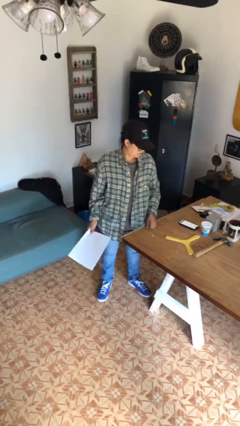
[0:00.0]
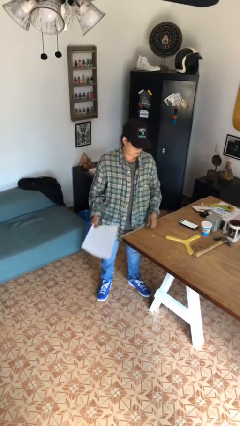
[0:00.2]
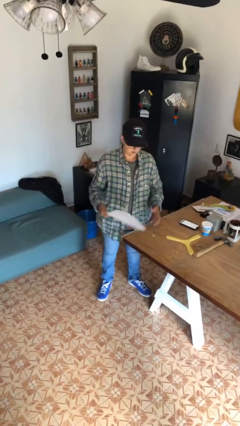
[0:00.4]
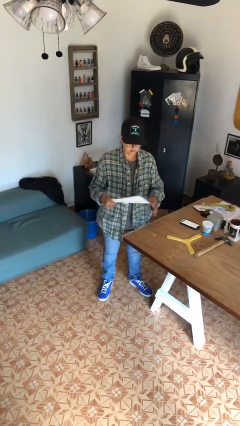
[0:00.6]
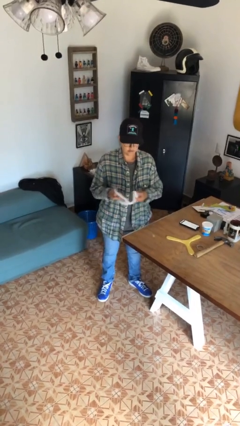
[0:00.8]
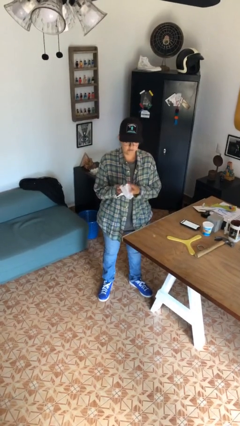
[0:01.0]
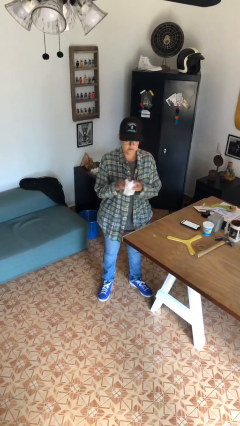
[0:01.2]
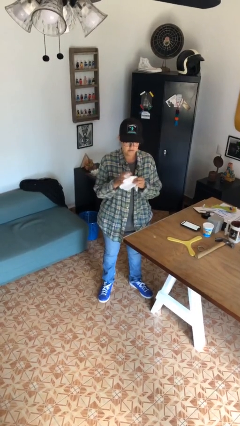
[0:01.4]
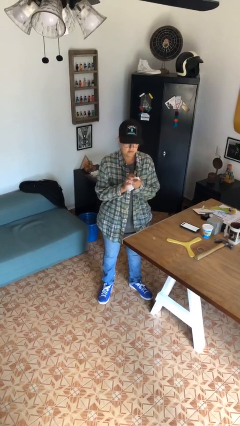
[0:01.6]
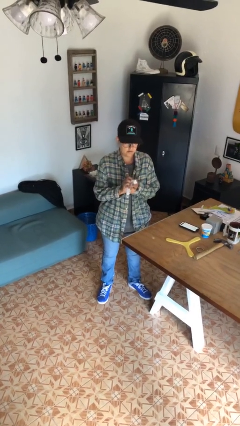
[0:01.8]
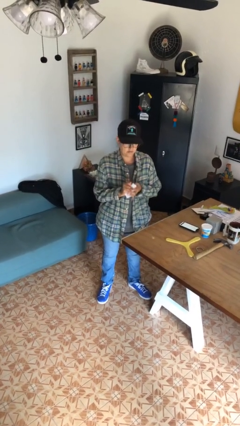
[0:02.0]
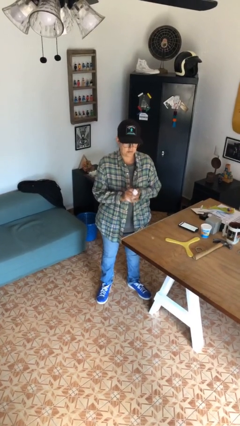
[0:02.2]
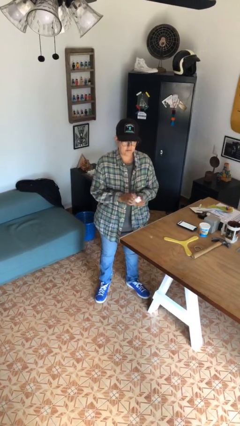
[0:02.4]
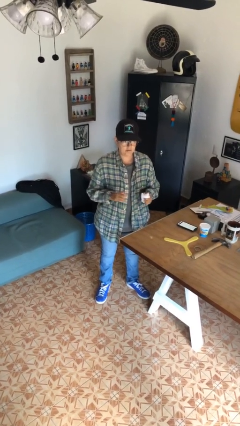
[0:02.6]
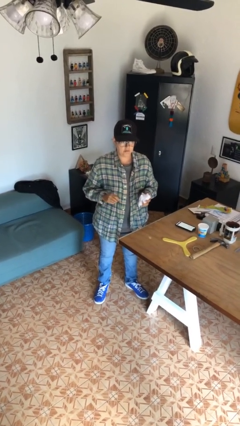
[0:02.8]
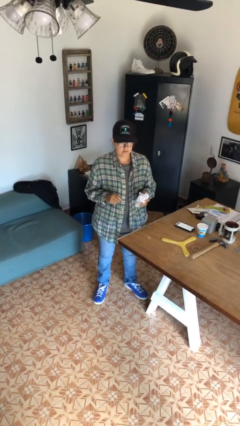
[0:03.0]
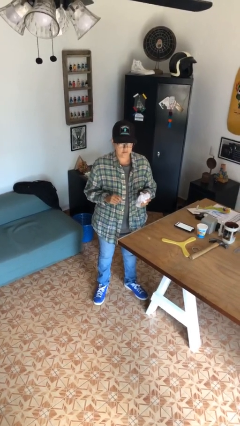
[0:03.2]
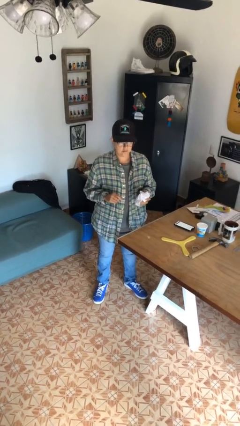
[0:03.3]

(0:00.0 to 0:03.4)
person crumples paper

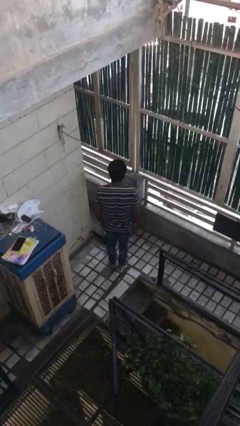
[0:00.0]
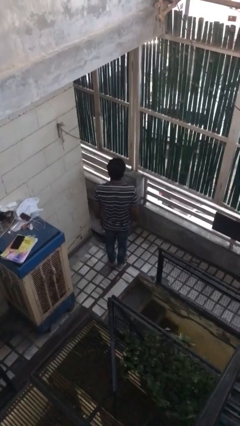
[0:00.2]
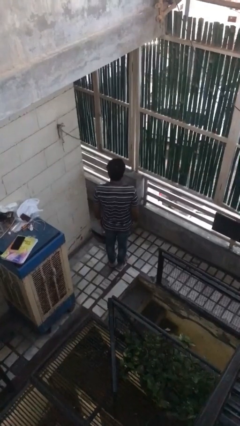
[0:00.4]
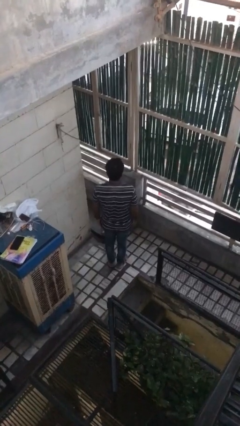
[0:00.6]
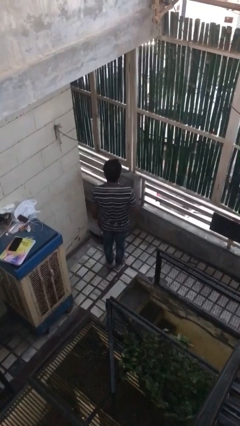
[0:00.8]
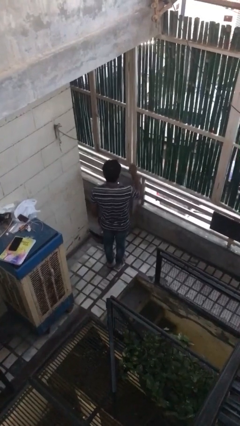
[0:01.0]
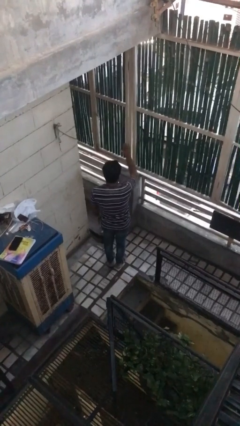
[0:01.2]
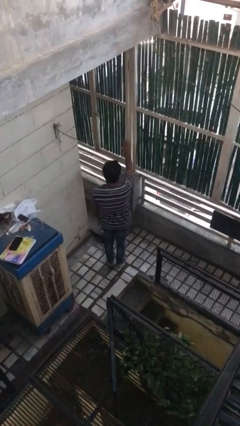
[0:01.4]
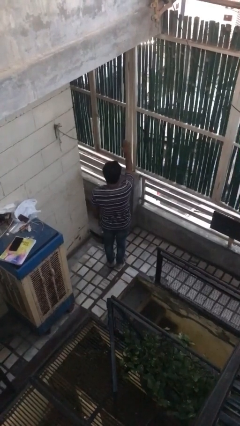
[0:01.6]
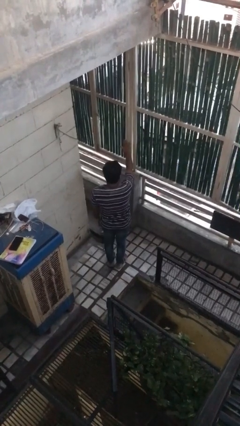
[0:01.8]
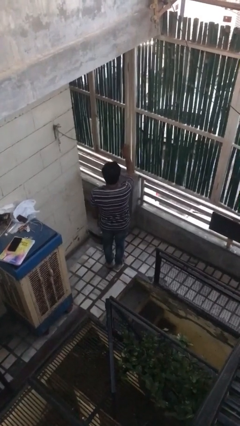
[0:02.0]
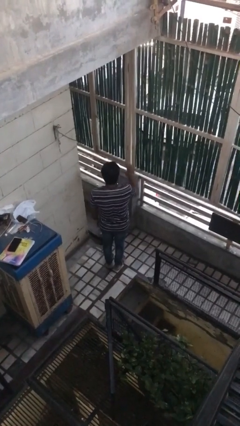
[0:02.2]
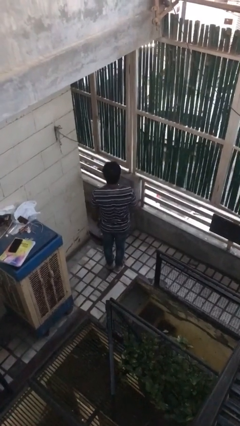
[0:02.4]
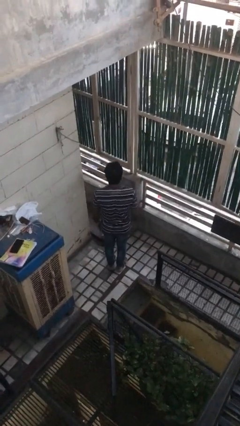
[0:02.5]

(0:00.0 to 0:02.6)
person gestures stop

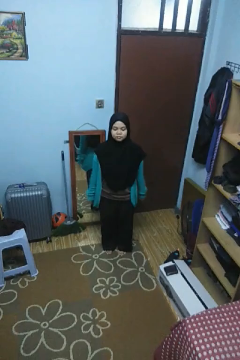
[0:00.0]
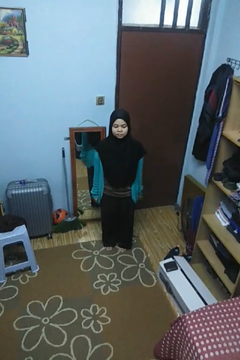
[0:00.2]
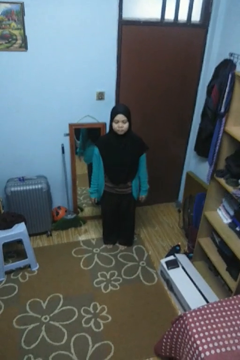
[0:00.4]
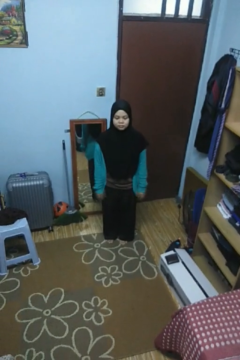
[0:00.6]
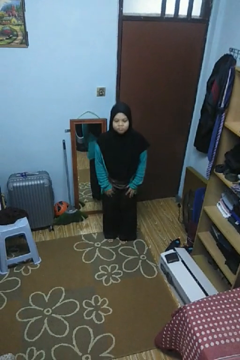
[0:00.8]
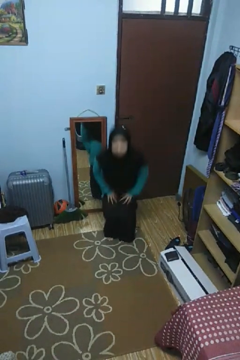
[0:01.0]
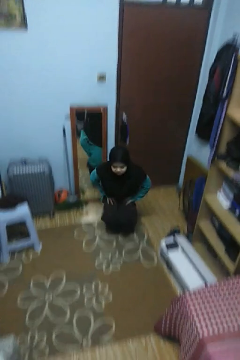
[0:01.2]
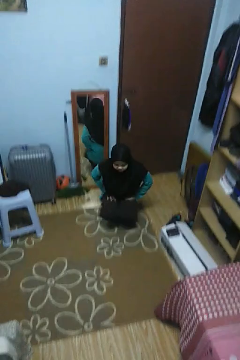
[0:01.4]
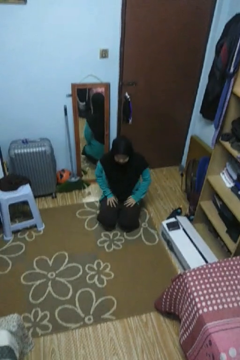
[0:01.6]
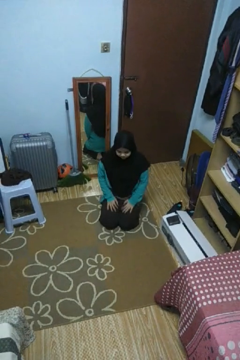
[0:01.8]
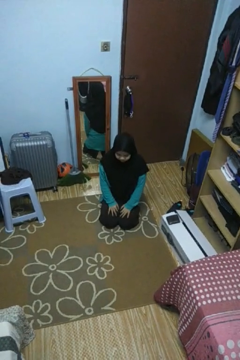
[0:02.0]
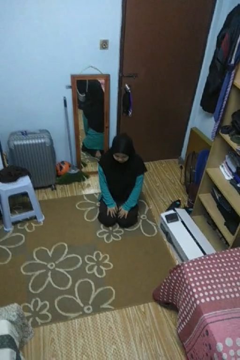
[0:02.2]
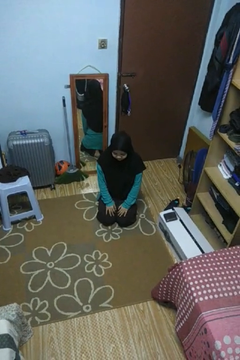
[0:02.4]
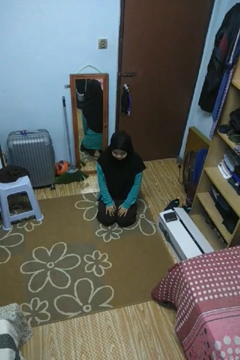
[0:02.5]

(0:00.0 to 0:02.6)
person kneels

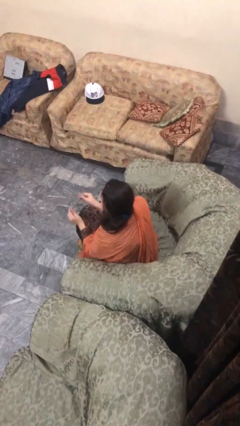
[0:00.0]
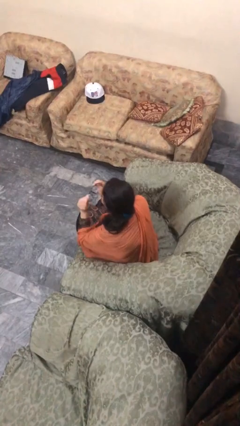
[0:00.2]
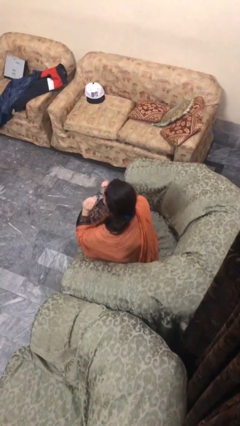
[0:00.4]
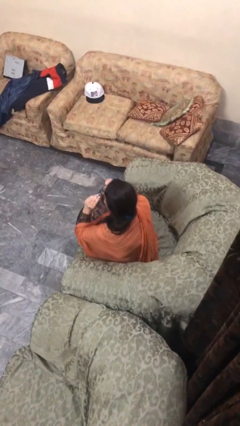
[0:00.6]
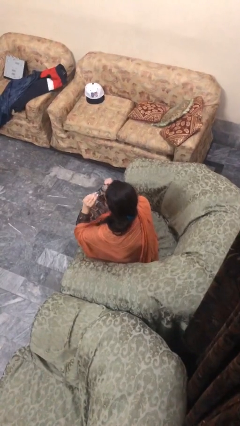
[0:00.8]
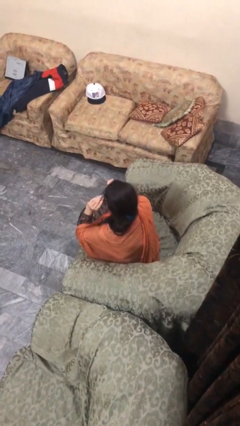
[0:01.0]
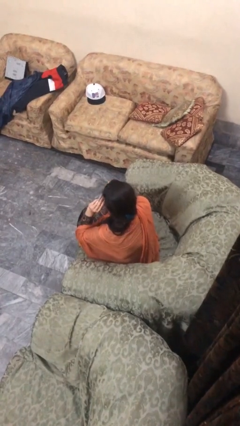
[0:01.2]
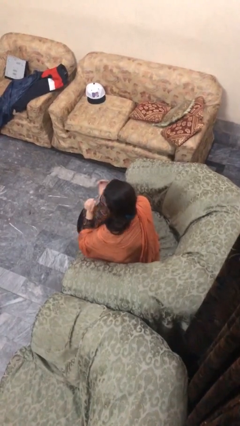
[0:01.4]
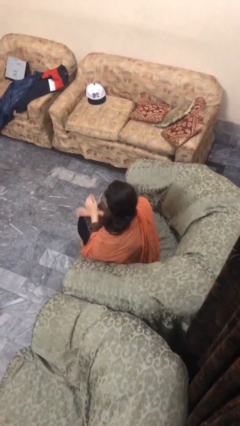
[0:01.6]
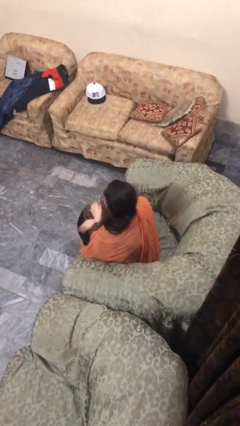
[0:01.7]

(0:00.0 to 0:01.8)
person puts on glasses

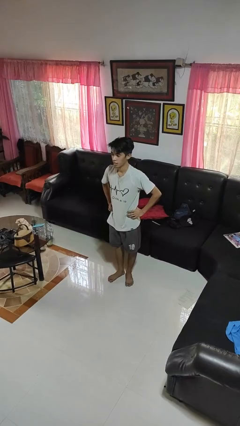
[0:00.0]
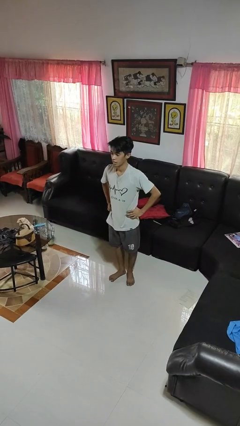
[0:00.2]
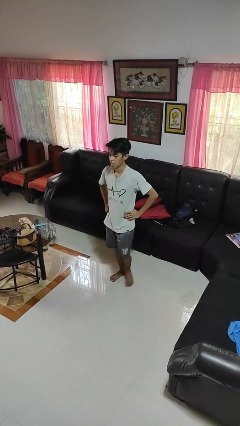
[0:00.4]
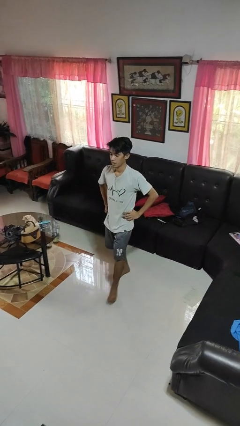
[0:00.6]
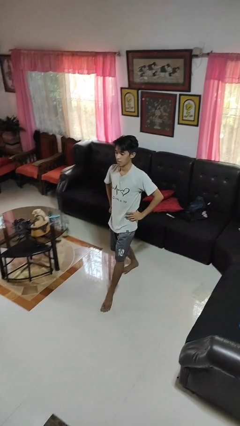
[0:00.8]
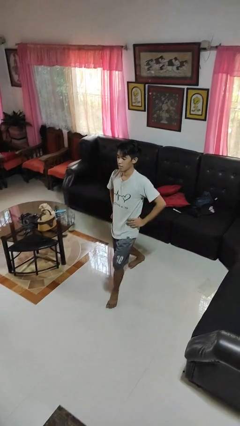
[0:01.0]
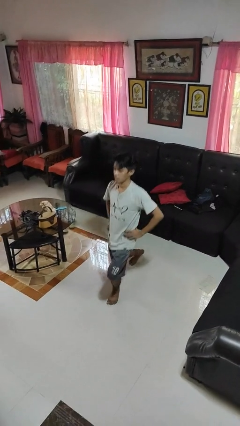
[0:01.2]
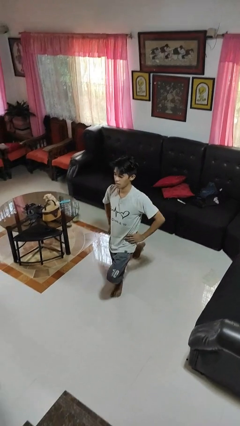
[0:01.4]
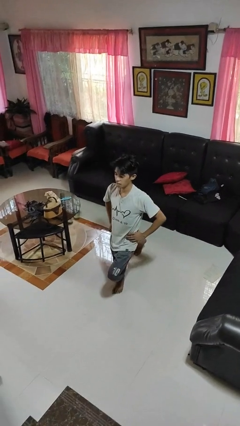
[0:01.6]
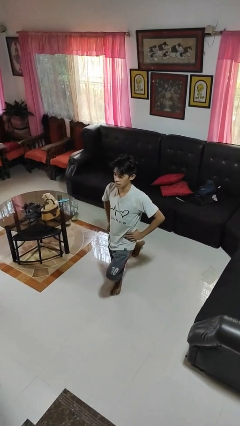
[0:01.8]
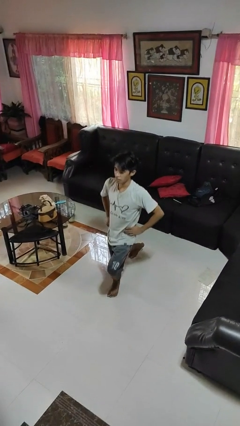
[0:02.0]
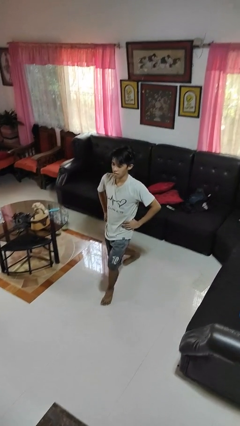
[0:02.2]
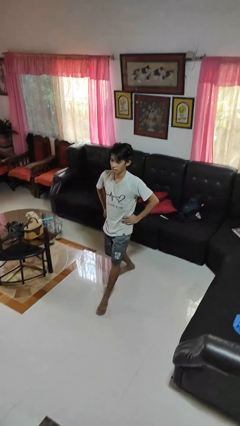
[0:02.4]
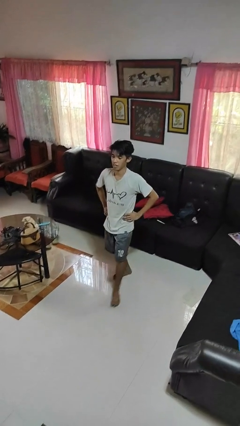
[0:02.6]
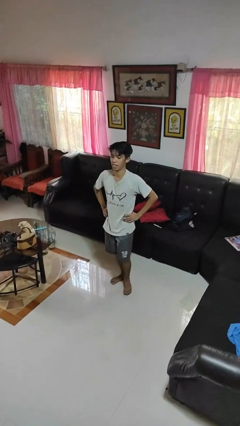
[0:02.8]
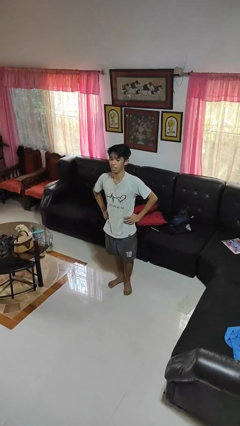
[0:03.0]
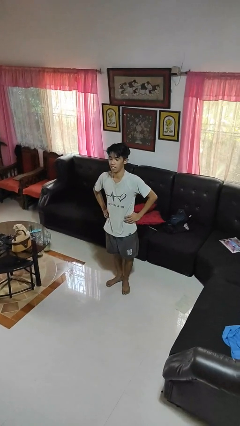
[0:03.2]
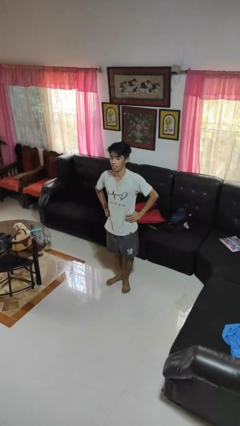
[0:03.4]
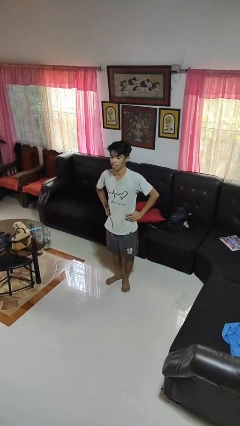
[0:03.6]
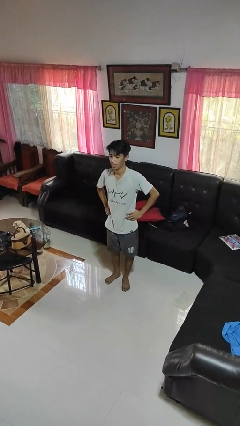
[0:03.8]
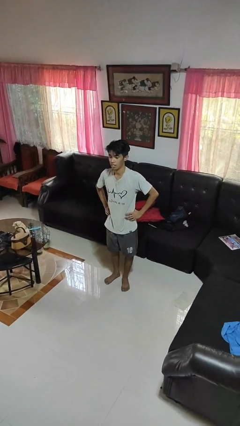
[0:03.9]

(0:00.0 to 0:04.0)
person exercises with lunges

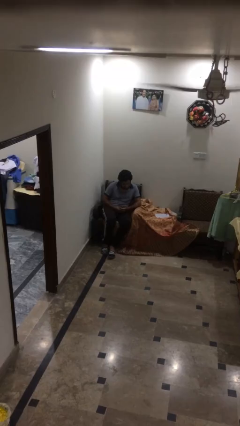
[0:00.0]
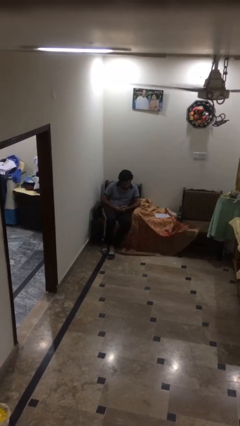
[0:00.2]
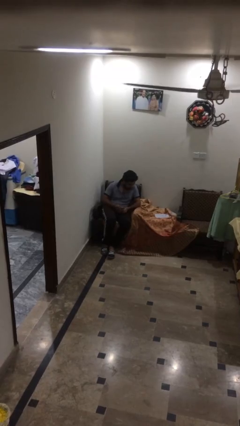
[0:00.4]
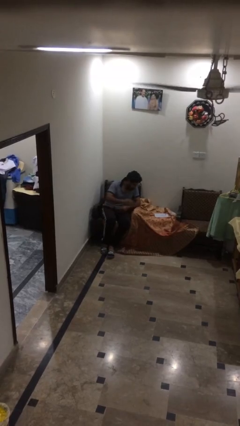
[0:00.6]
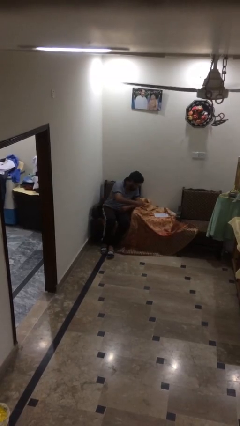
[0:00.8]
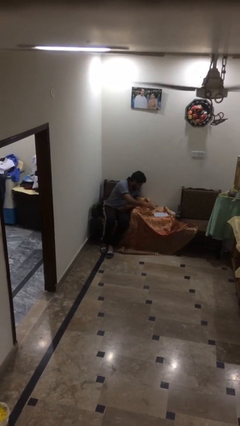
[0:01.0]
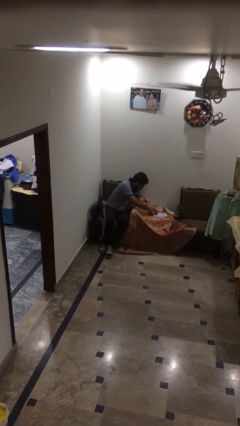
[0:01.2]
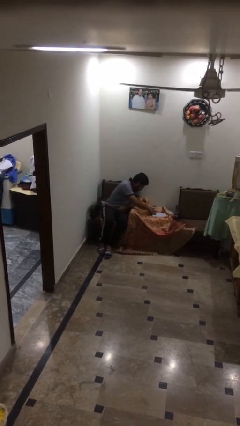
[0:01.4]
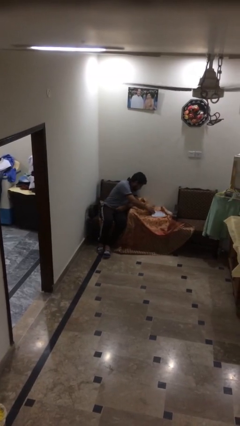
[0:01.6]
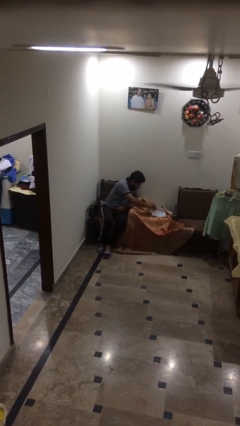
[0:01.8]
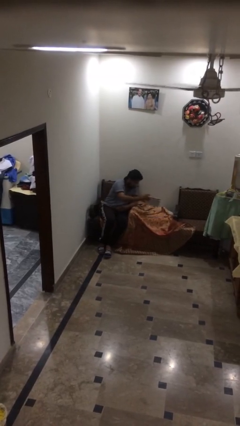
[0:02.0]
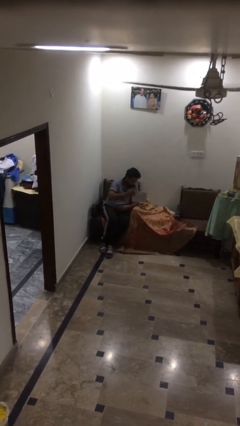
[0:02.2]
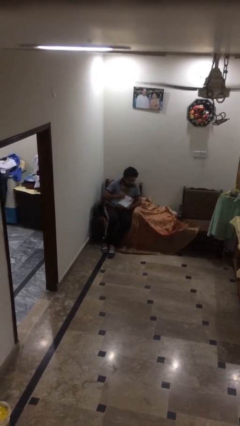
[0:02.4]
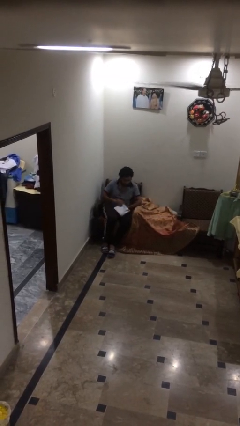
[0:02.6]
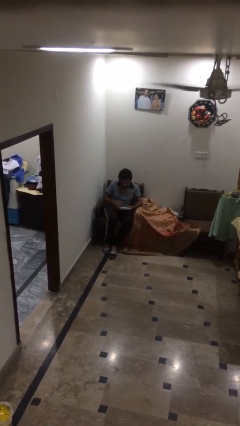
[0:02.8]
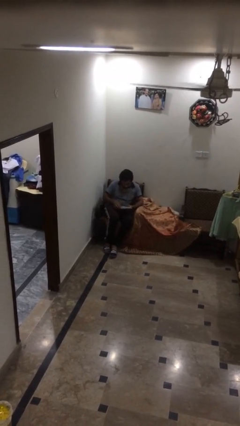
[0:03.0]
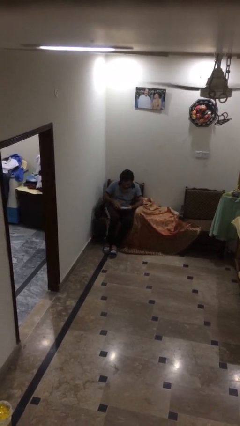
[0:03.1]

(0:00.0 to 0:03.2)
person picks up object from table

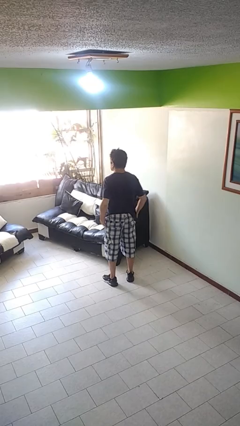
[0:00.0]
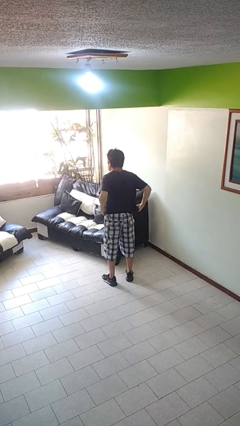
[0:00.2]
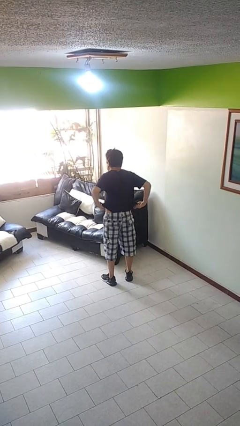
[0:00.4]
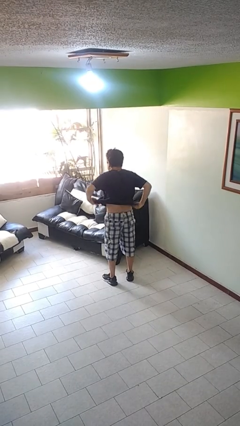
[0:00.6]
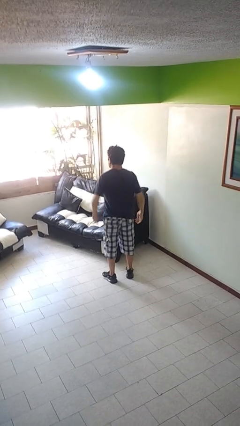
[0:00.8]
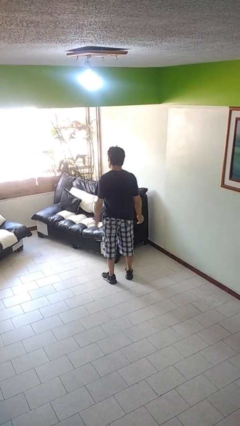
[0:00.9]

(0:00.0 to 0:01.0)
person untucks shirt
